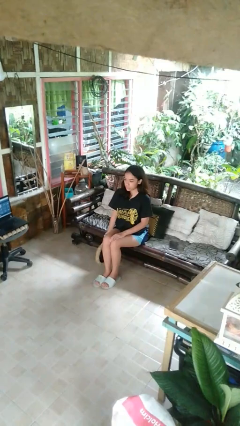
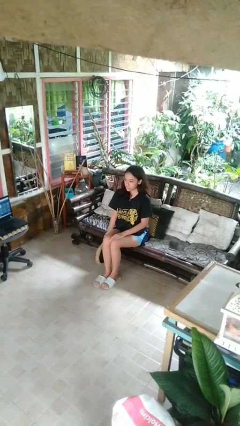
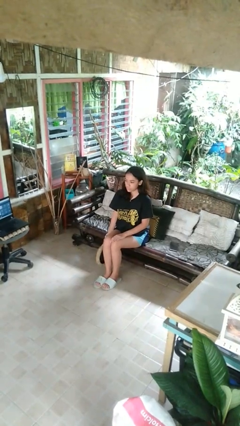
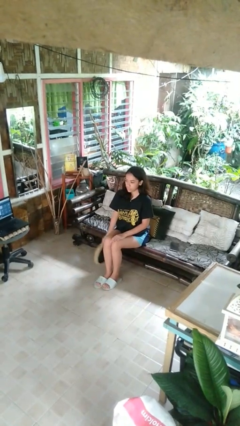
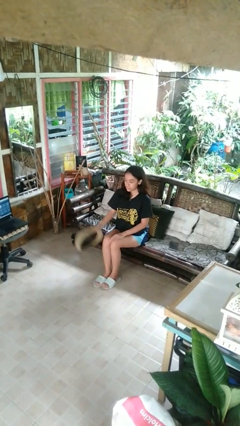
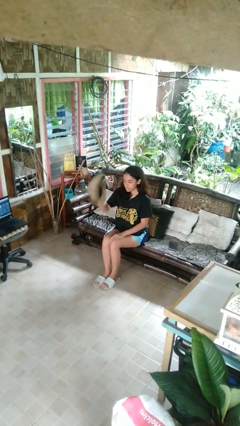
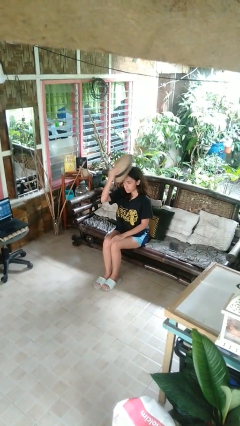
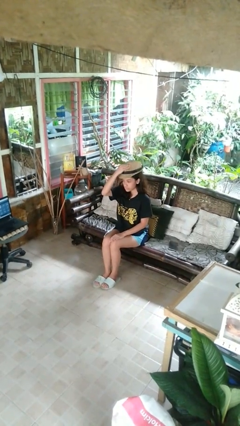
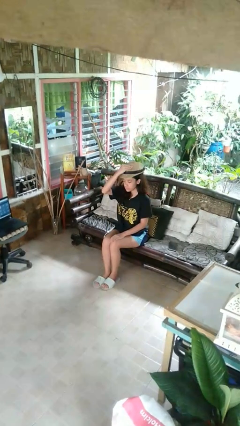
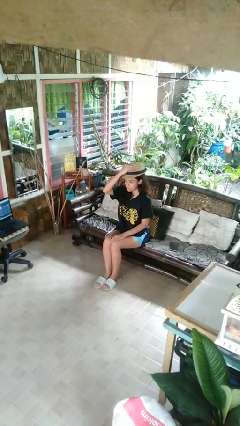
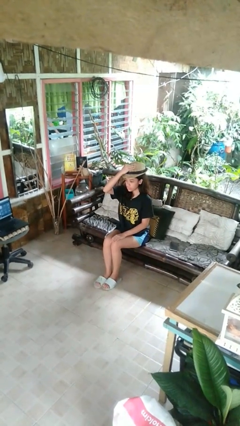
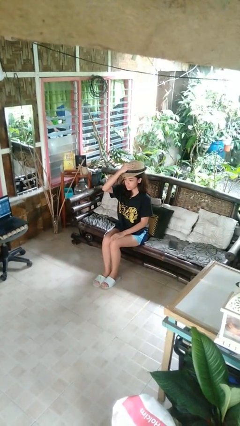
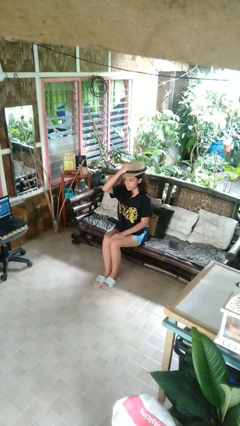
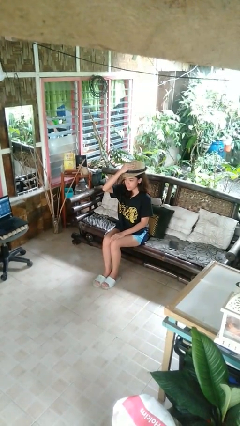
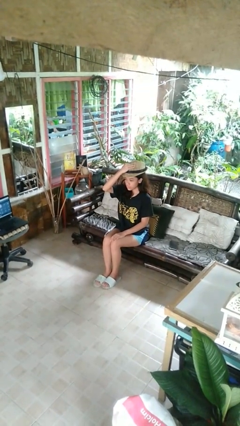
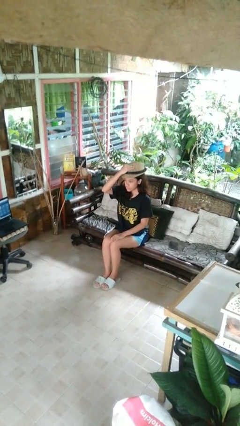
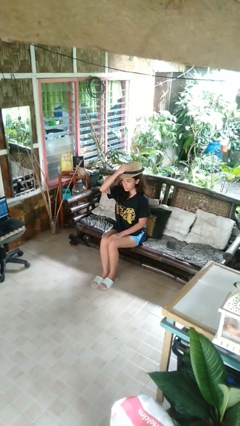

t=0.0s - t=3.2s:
person puts on hat

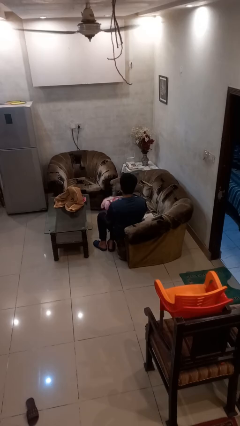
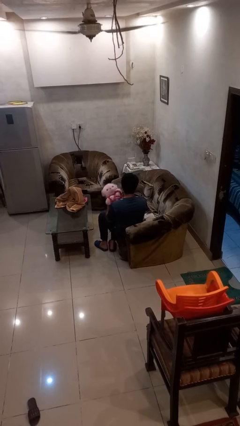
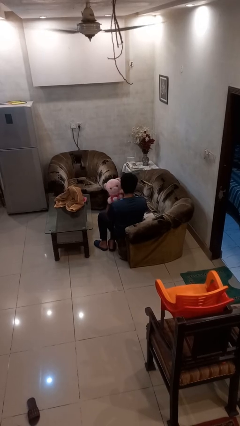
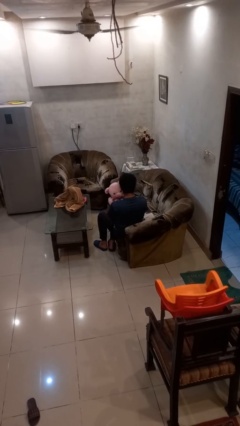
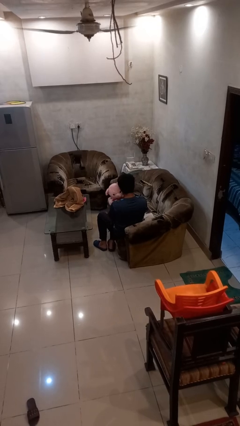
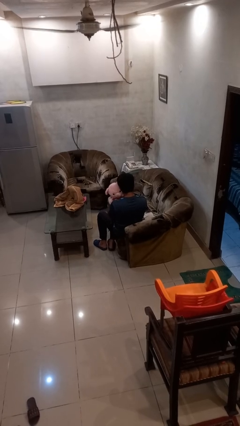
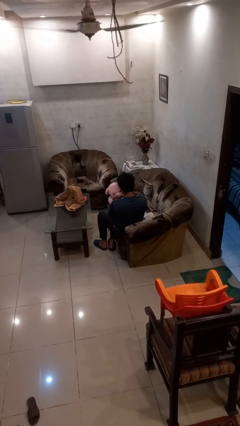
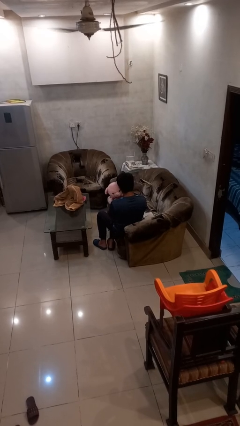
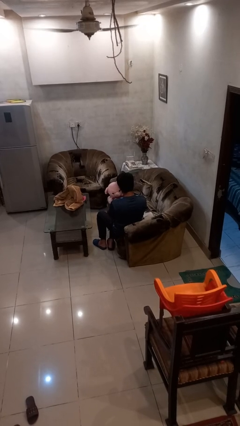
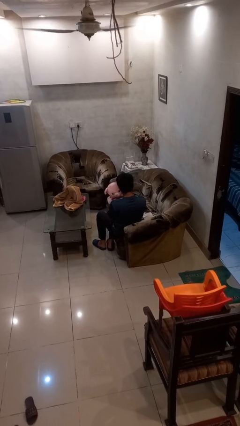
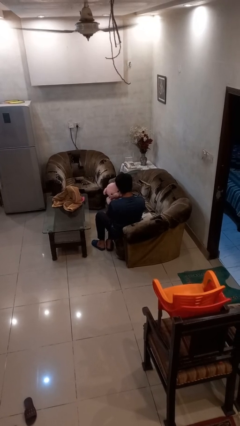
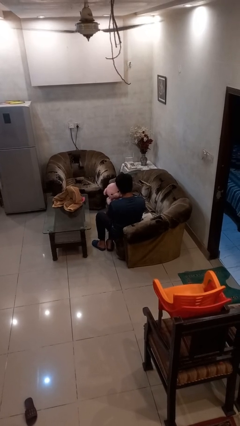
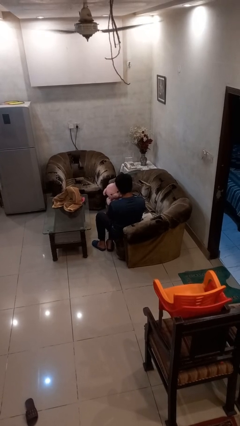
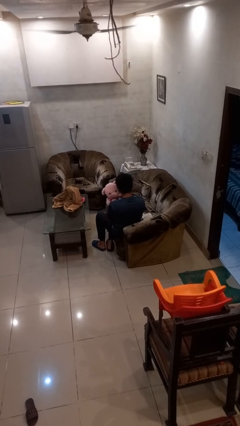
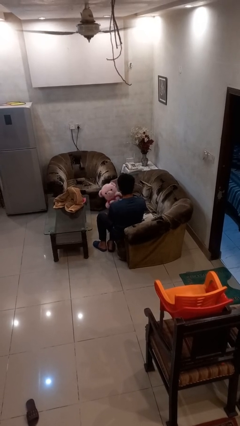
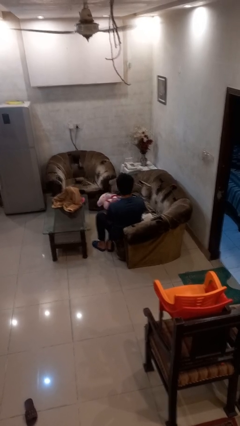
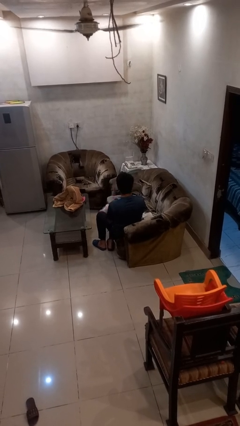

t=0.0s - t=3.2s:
person hugs stuffed animal

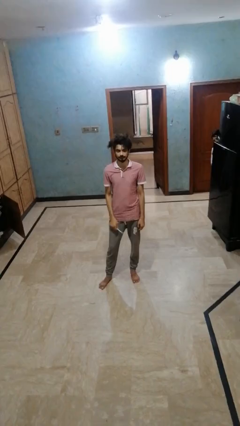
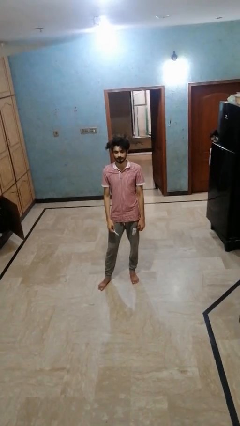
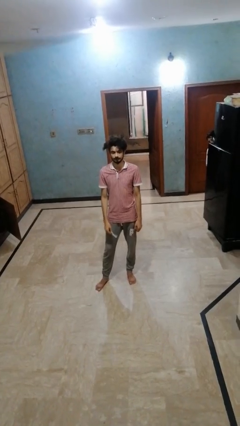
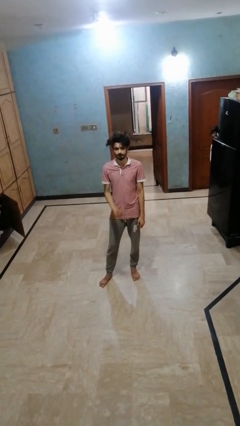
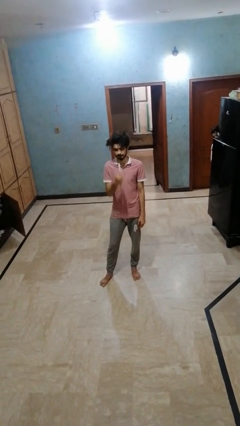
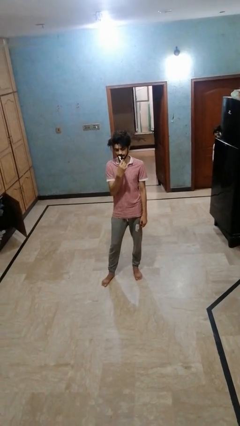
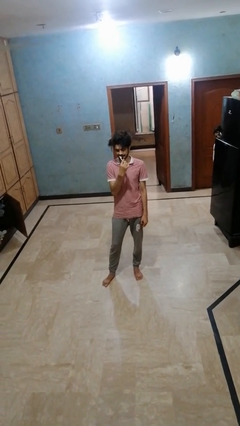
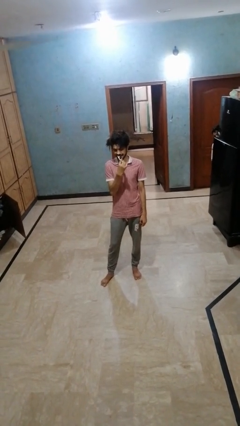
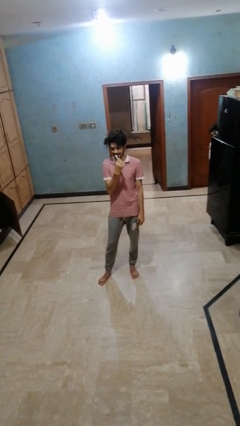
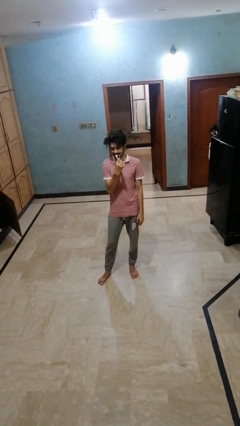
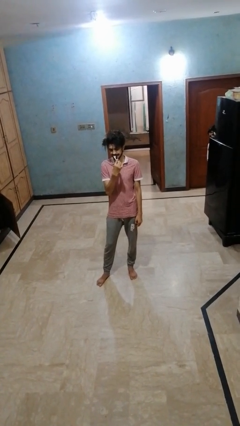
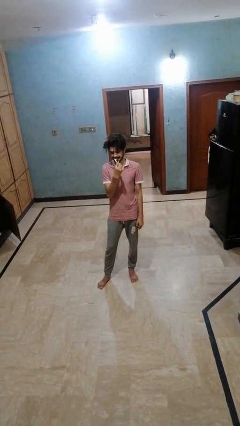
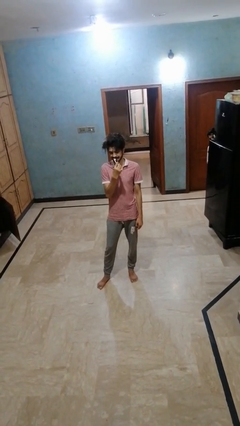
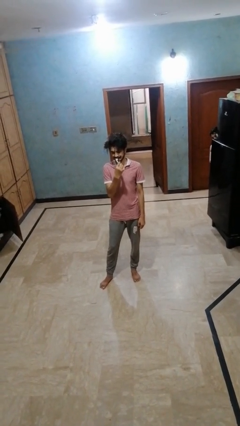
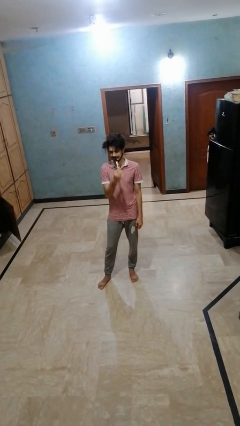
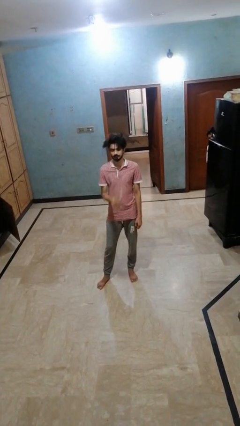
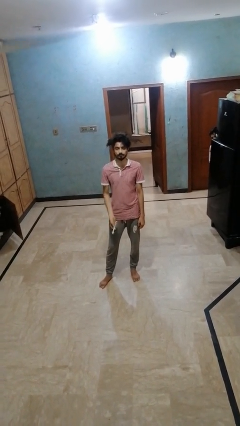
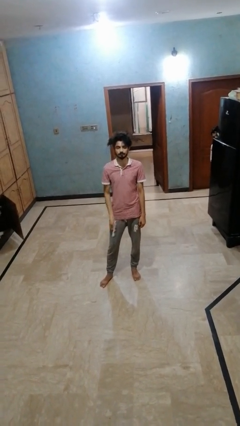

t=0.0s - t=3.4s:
person brushes teeth

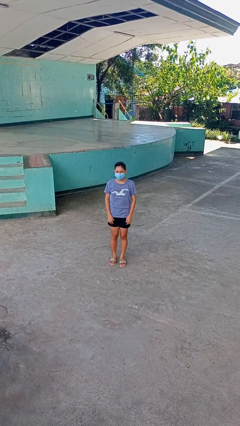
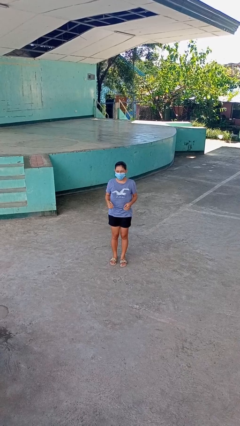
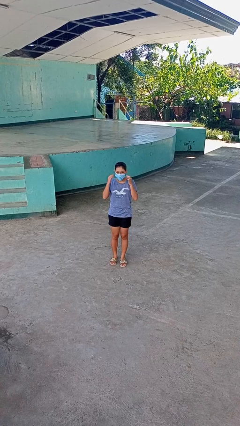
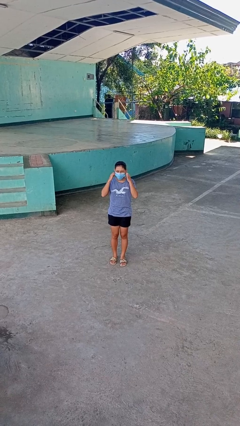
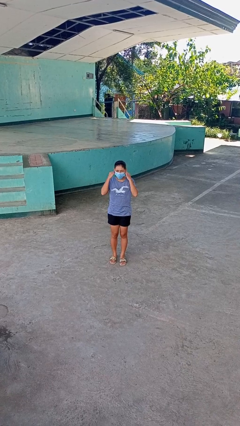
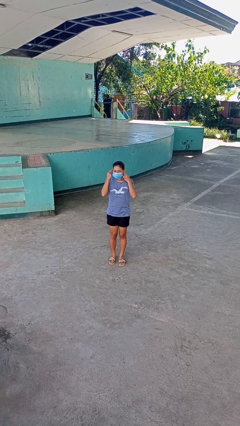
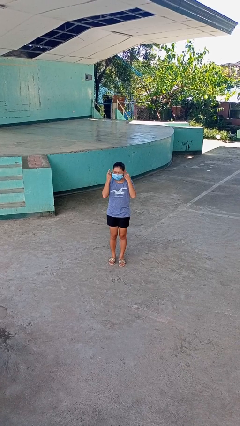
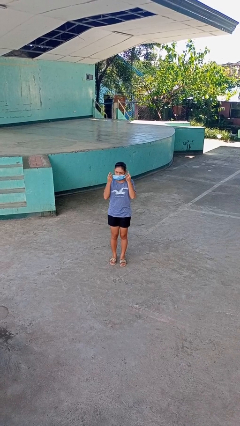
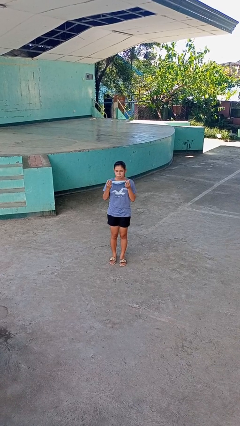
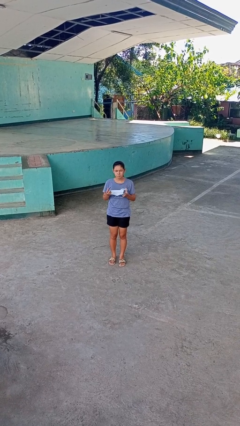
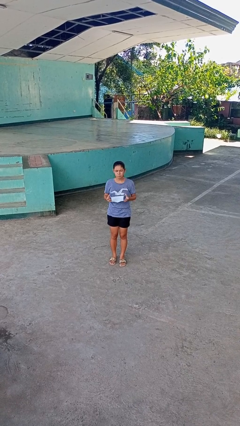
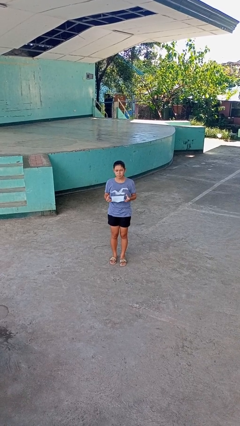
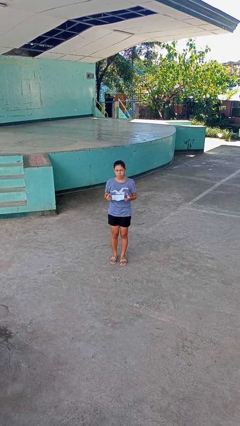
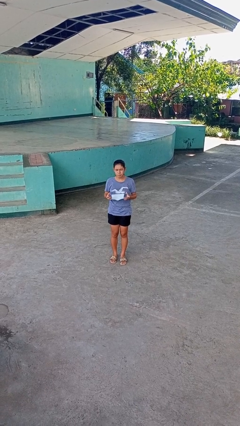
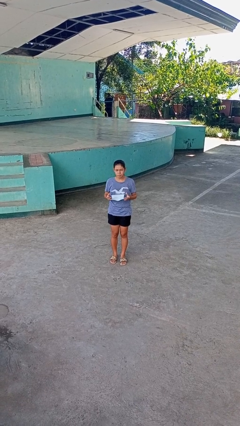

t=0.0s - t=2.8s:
person takes off facemask

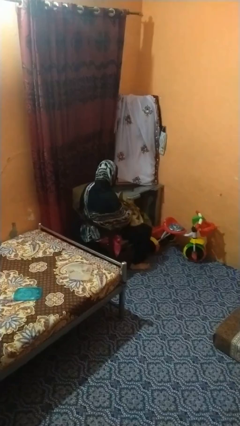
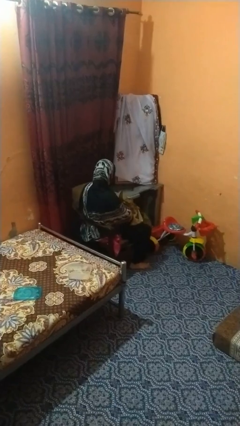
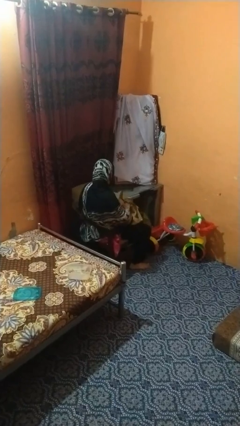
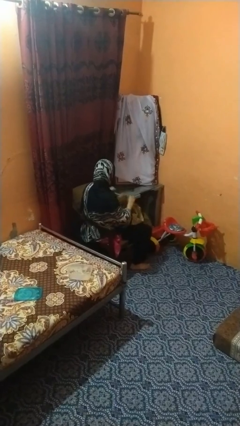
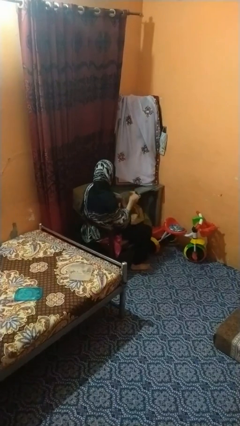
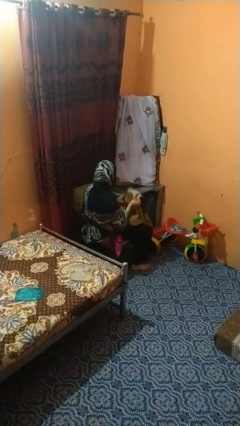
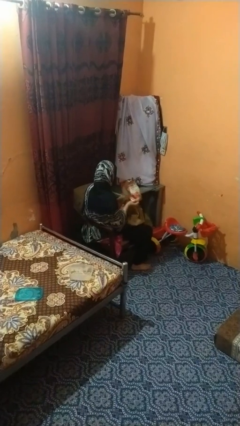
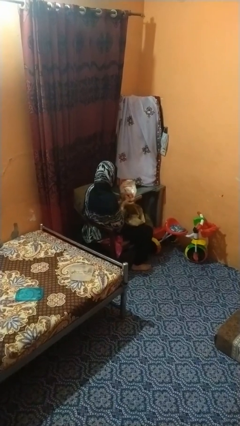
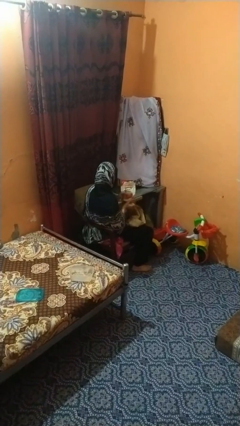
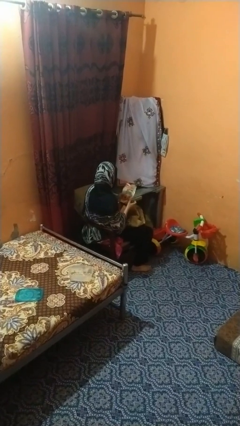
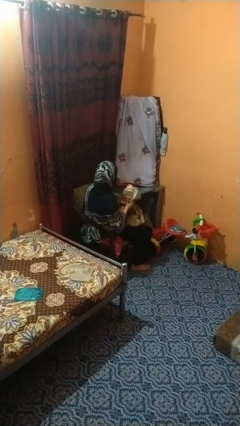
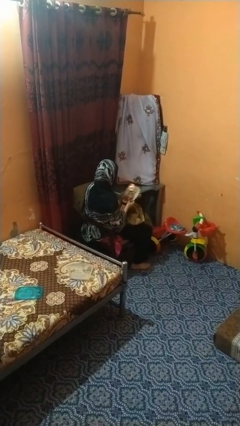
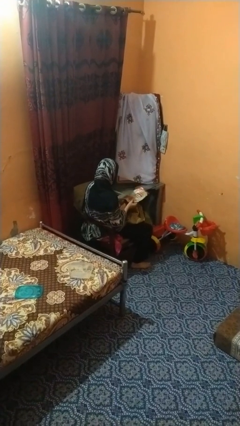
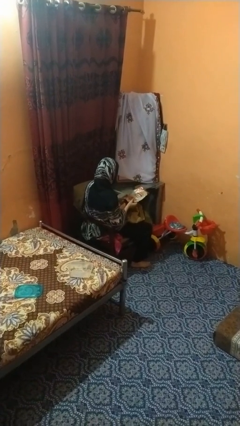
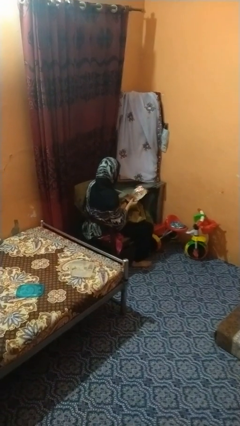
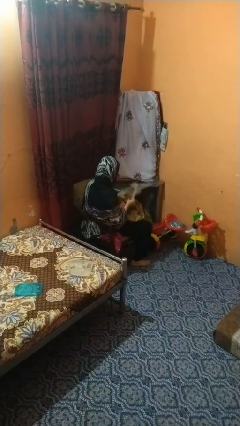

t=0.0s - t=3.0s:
person takes object from bag

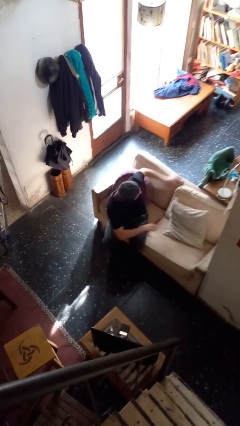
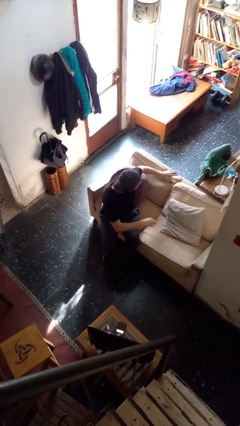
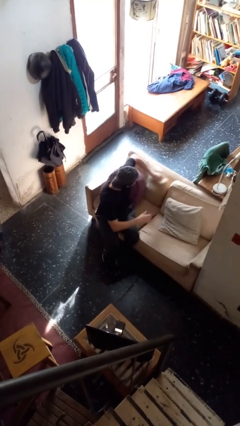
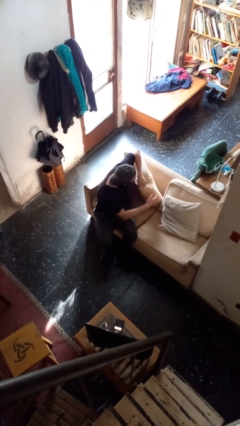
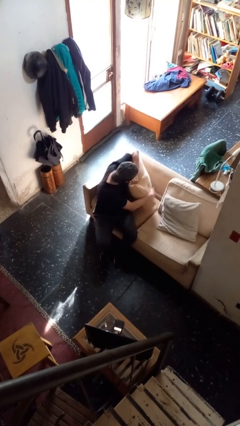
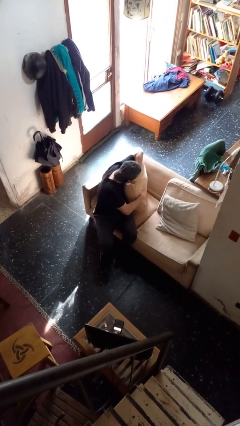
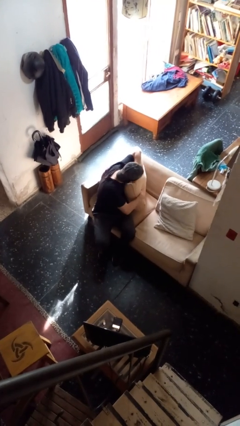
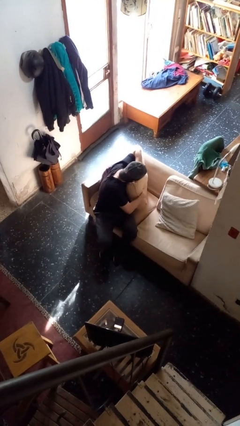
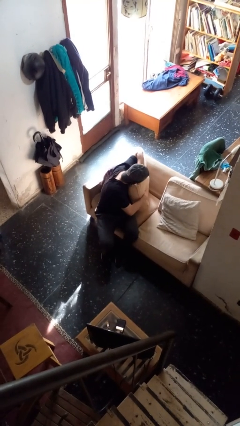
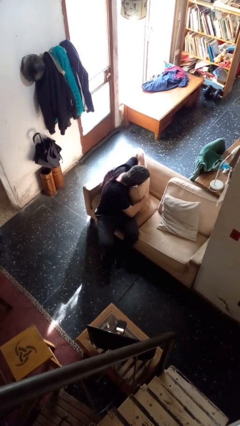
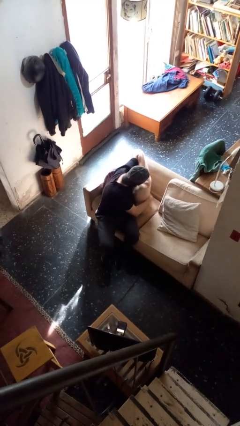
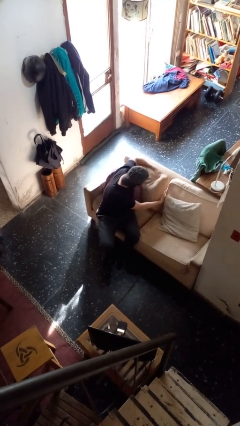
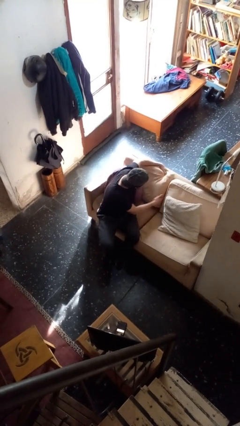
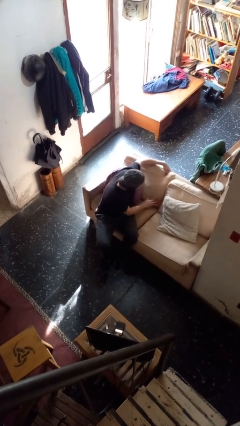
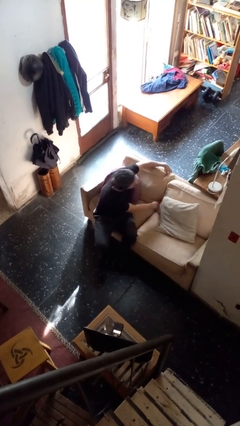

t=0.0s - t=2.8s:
person searches in couch
